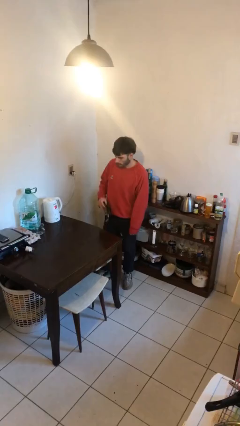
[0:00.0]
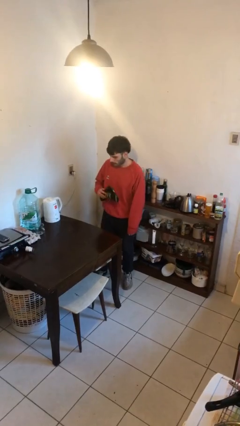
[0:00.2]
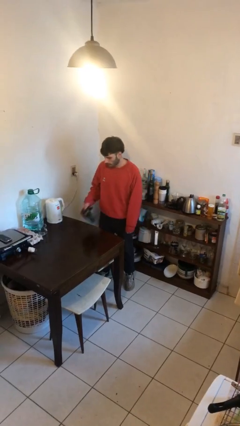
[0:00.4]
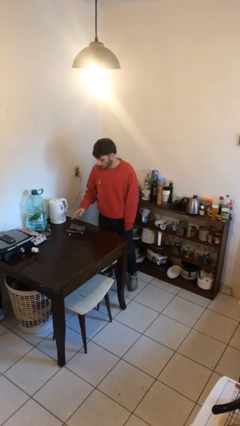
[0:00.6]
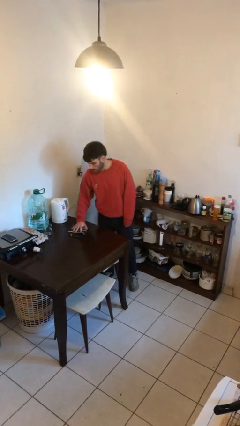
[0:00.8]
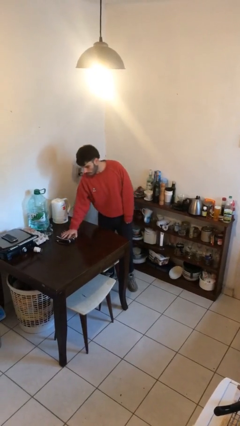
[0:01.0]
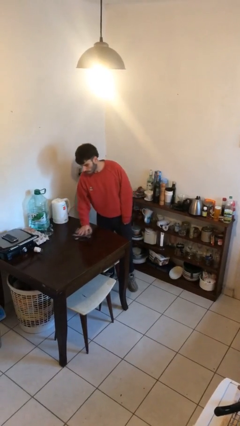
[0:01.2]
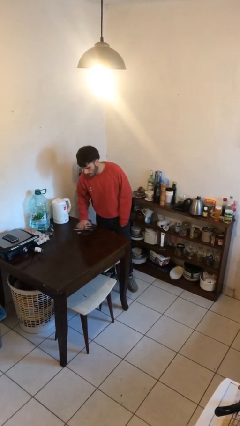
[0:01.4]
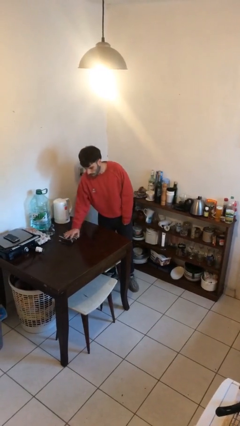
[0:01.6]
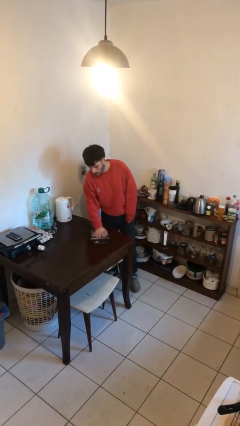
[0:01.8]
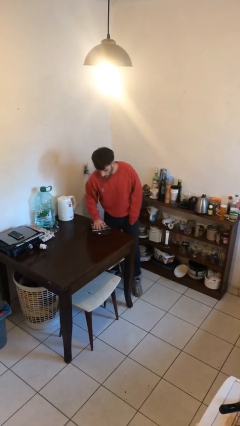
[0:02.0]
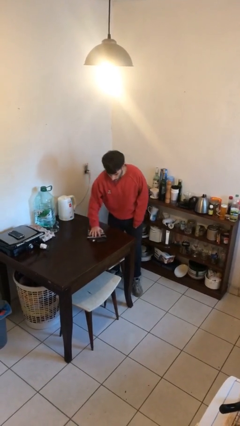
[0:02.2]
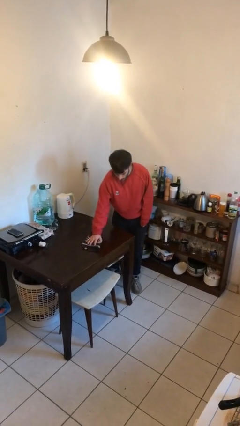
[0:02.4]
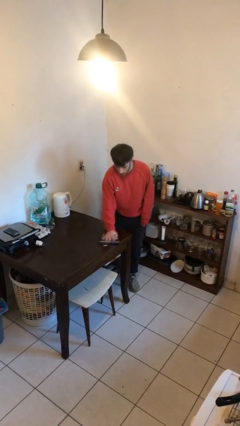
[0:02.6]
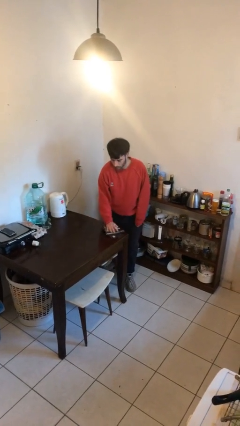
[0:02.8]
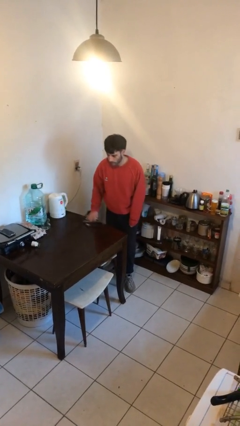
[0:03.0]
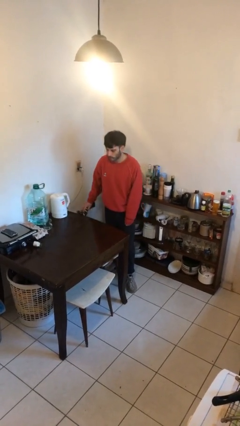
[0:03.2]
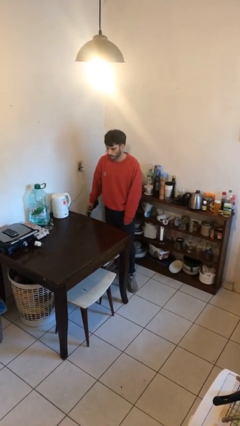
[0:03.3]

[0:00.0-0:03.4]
person cleans table with rag

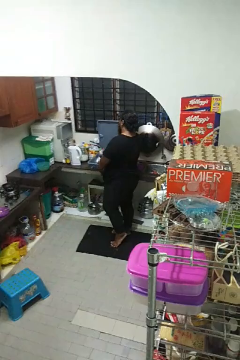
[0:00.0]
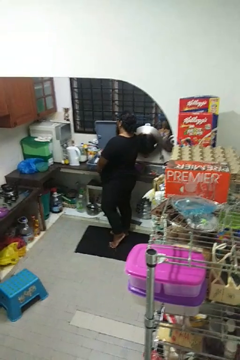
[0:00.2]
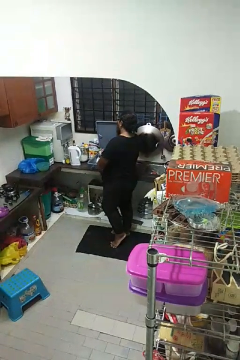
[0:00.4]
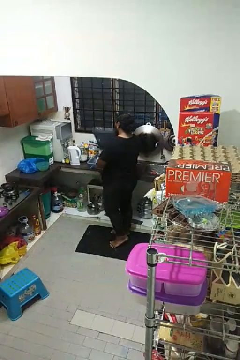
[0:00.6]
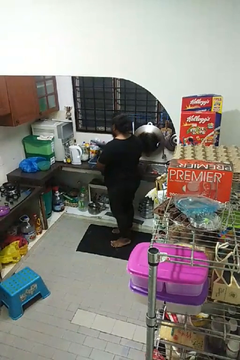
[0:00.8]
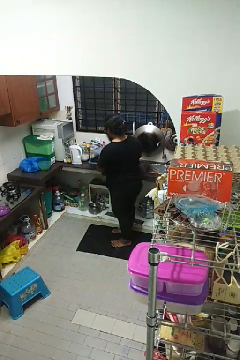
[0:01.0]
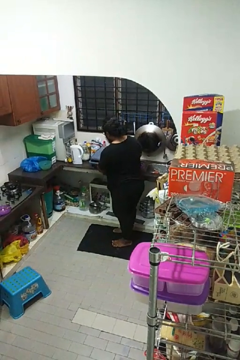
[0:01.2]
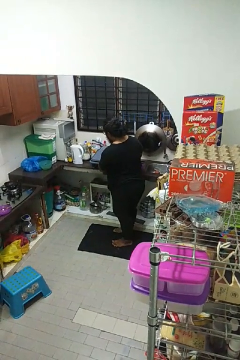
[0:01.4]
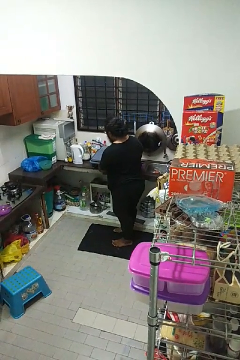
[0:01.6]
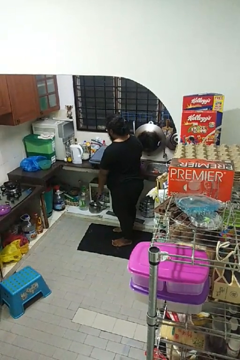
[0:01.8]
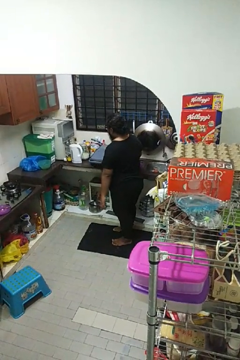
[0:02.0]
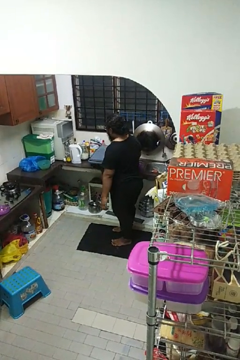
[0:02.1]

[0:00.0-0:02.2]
person closes dishwasher

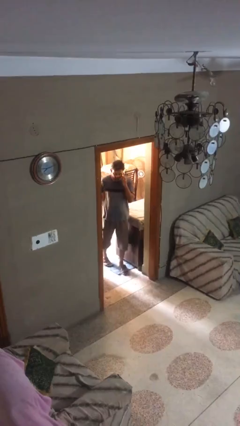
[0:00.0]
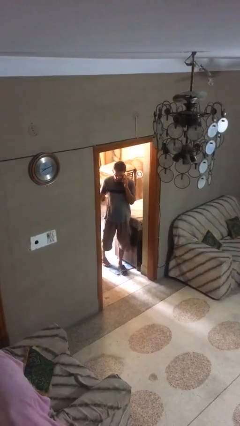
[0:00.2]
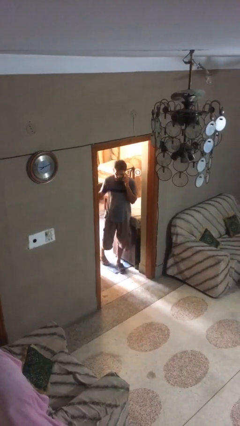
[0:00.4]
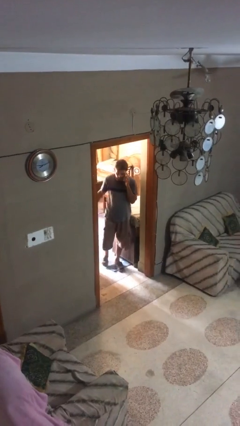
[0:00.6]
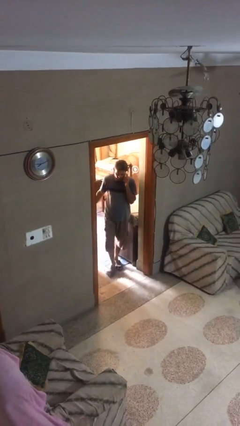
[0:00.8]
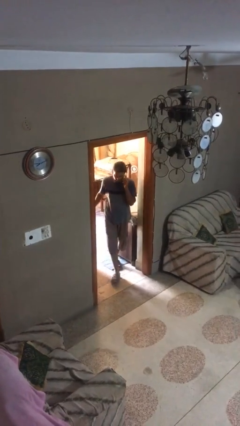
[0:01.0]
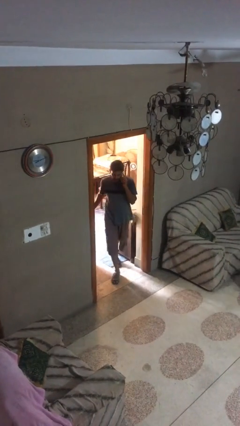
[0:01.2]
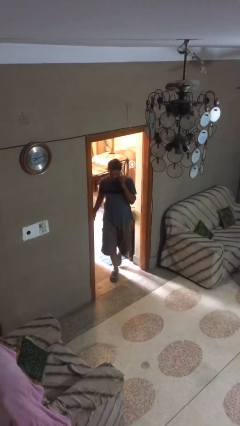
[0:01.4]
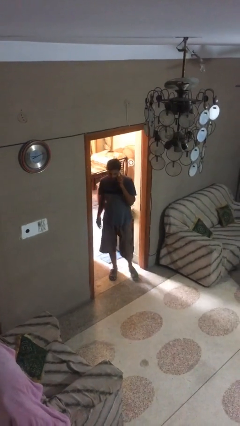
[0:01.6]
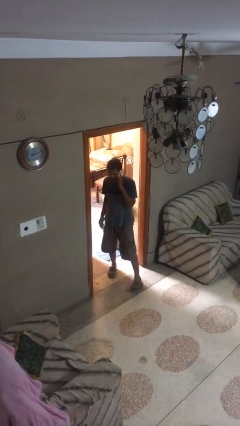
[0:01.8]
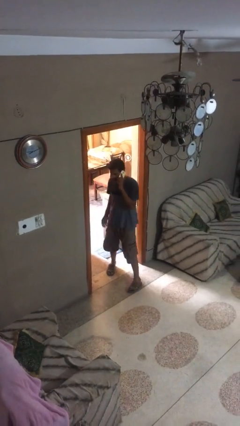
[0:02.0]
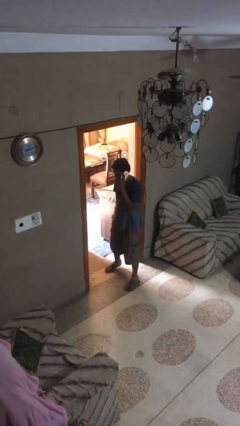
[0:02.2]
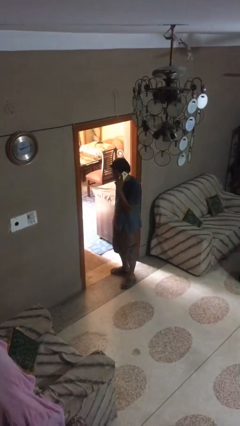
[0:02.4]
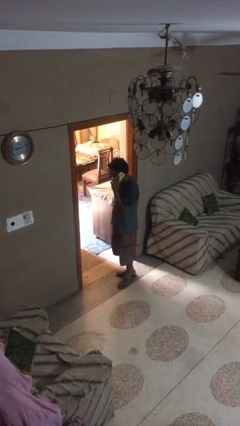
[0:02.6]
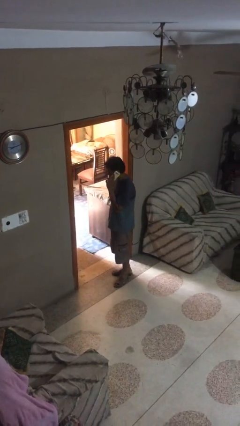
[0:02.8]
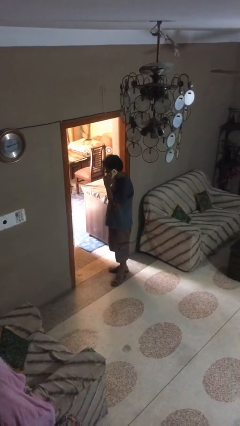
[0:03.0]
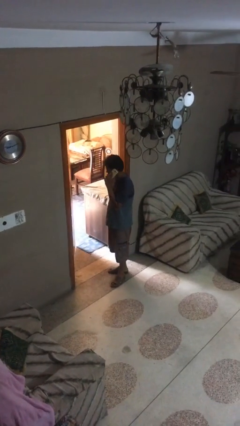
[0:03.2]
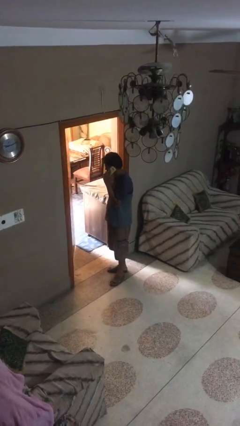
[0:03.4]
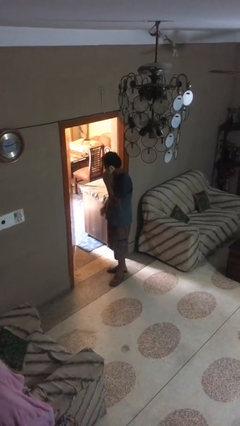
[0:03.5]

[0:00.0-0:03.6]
person enters scene through structure

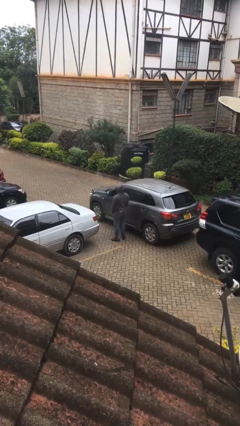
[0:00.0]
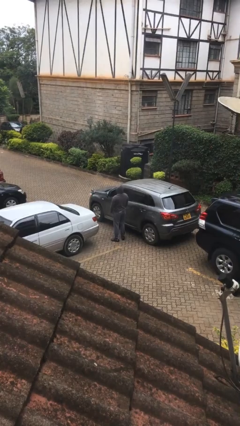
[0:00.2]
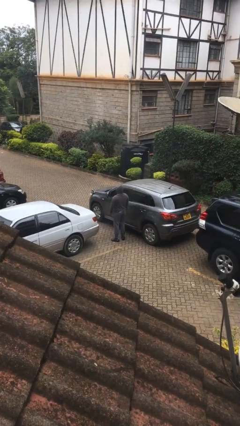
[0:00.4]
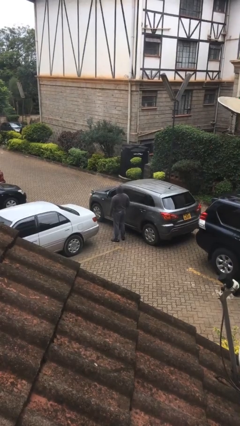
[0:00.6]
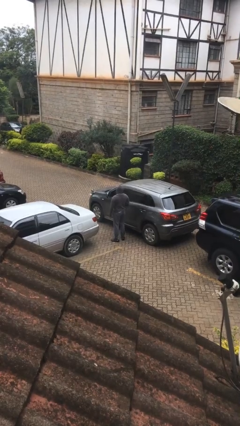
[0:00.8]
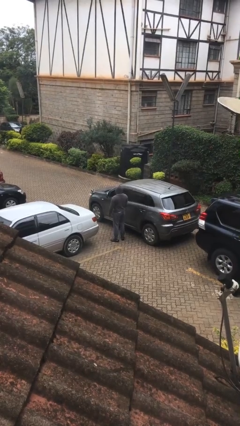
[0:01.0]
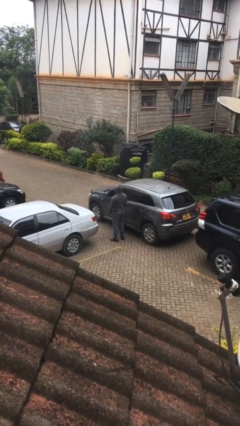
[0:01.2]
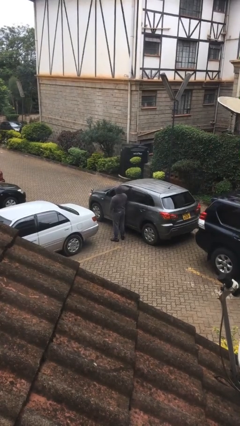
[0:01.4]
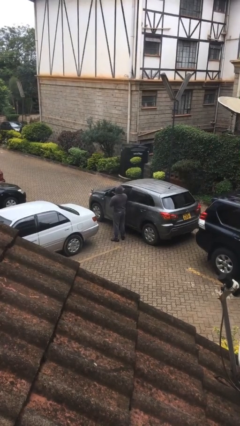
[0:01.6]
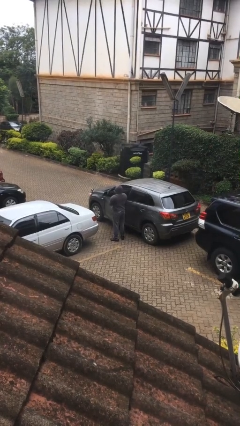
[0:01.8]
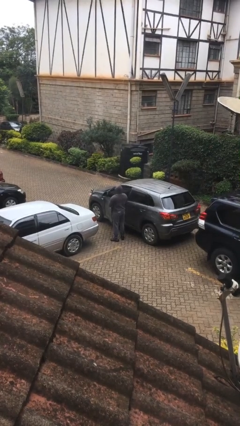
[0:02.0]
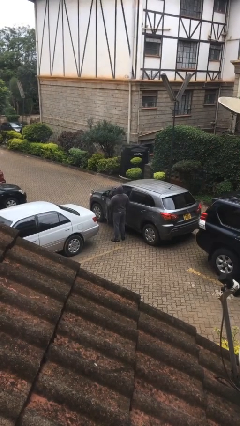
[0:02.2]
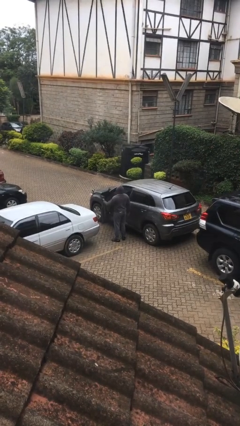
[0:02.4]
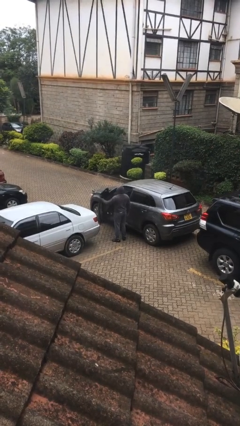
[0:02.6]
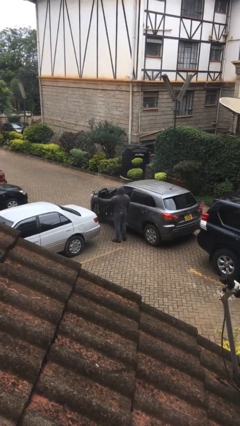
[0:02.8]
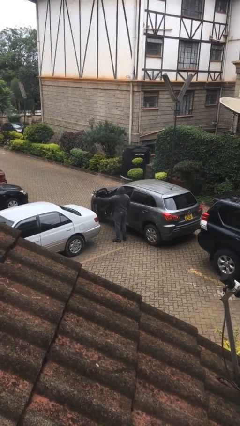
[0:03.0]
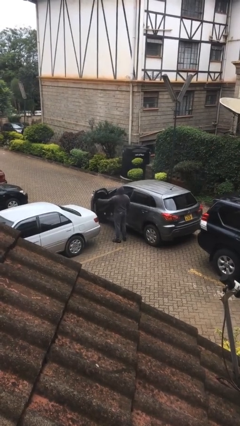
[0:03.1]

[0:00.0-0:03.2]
person opens car door

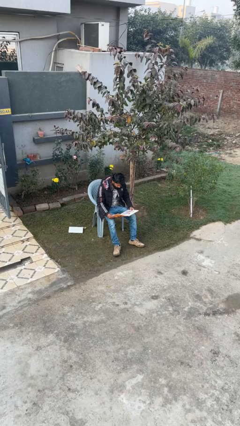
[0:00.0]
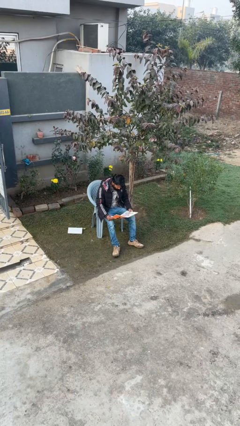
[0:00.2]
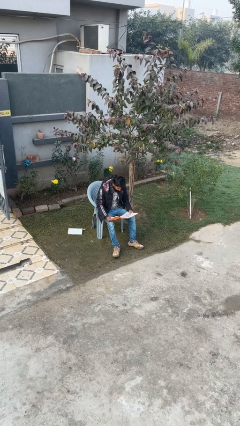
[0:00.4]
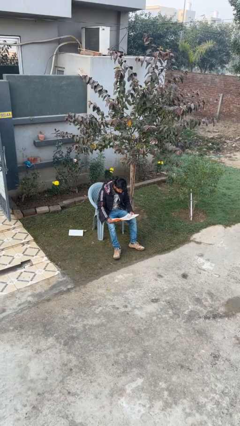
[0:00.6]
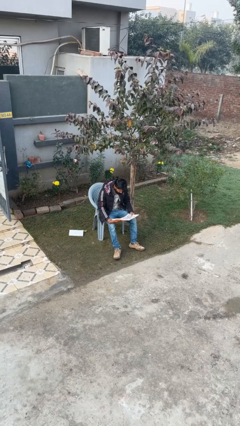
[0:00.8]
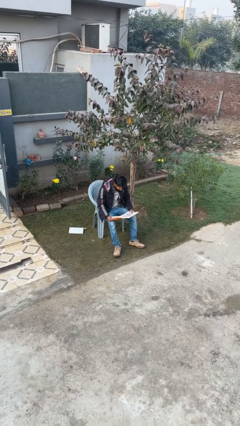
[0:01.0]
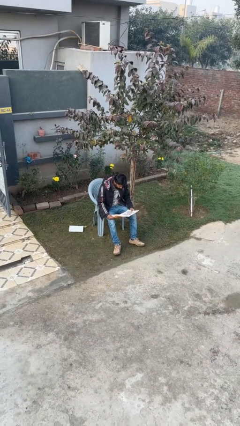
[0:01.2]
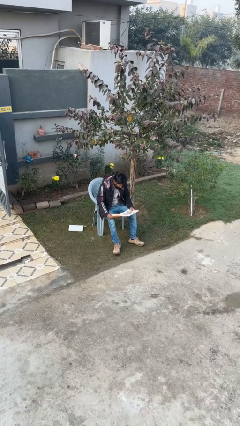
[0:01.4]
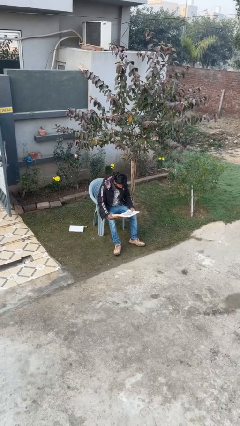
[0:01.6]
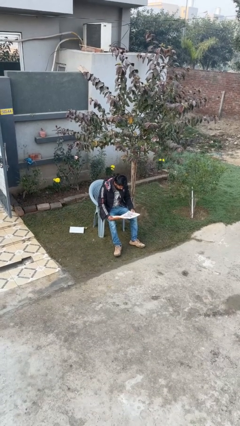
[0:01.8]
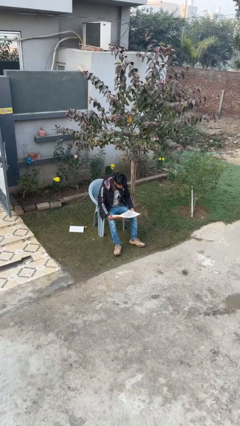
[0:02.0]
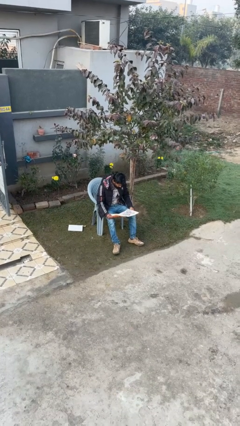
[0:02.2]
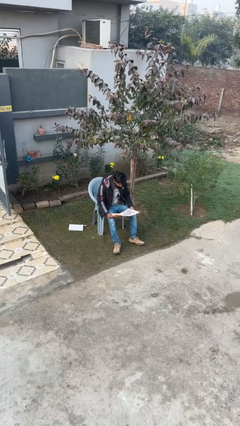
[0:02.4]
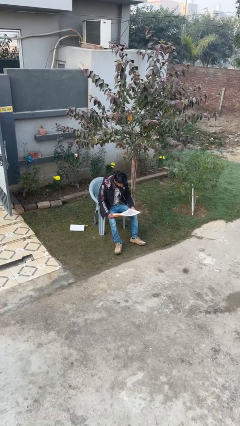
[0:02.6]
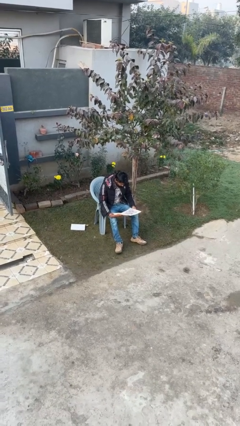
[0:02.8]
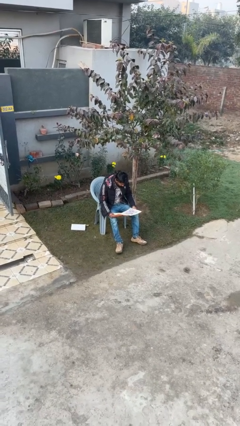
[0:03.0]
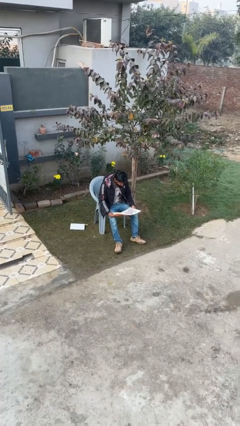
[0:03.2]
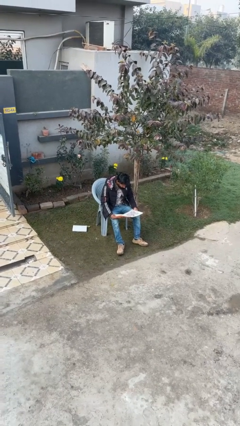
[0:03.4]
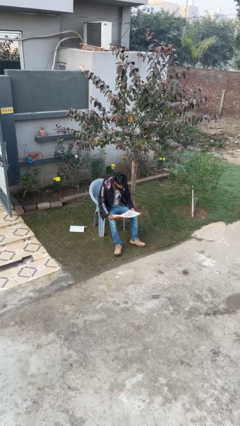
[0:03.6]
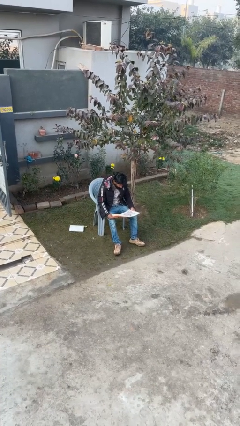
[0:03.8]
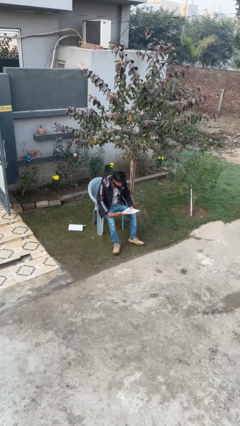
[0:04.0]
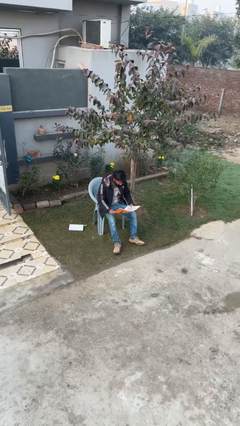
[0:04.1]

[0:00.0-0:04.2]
person reads document

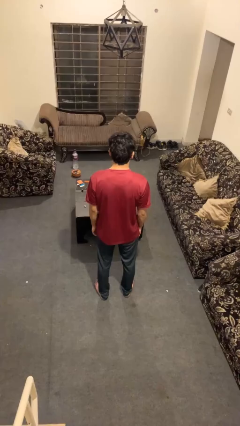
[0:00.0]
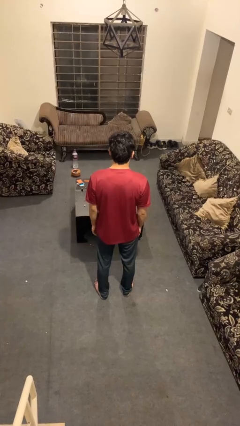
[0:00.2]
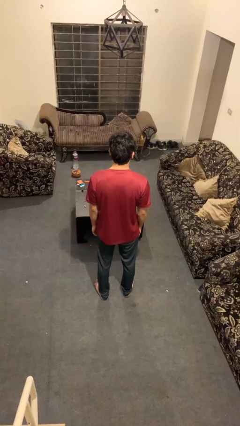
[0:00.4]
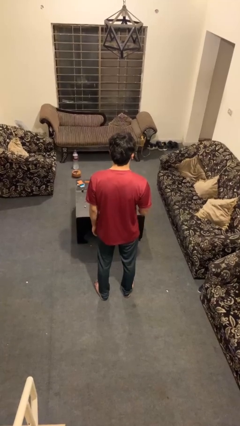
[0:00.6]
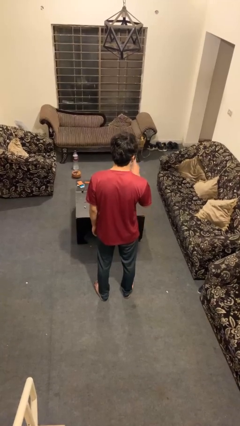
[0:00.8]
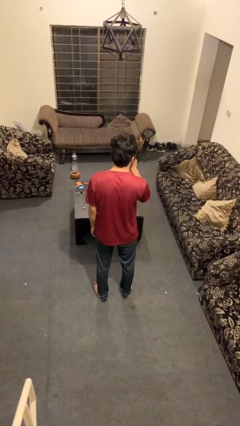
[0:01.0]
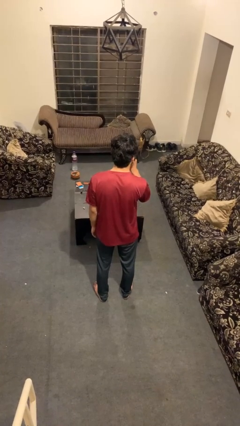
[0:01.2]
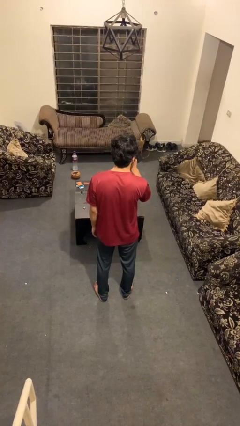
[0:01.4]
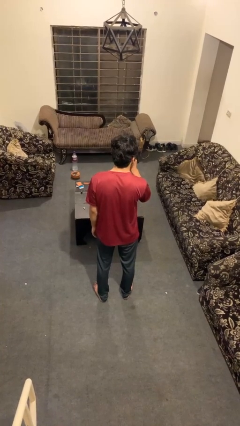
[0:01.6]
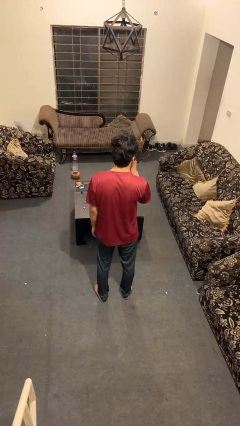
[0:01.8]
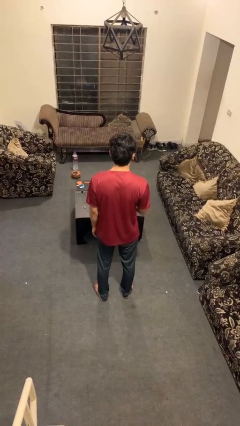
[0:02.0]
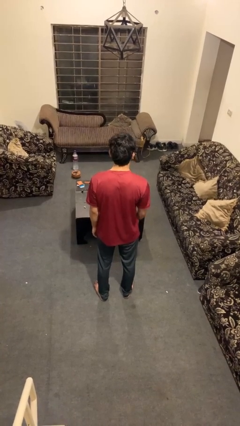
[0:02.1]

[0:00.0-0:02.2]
person gestures be quiet
